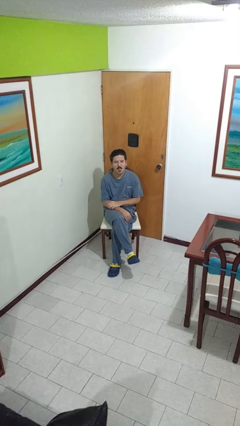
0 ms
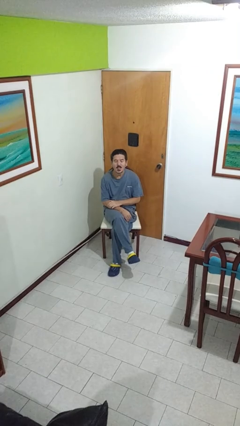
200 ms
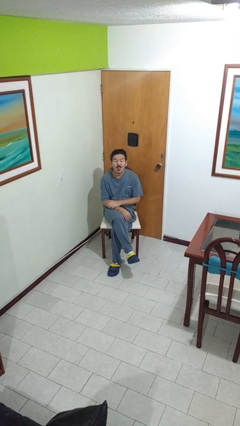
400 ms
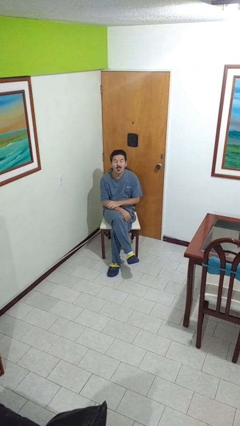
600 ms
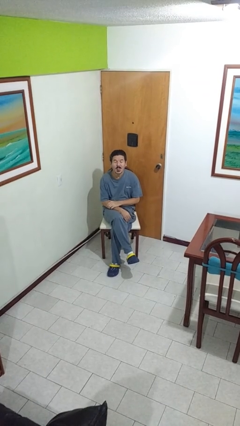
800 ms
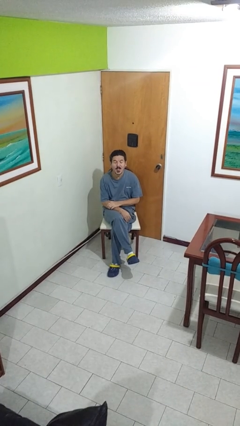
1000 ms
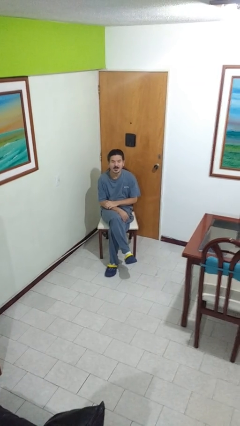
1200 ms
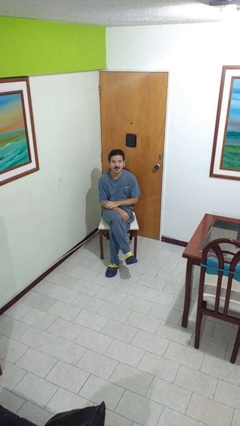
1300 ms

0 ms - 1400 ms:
person sticks out tongue

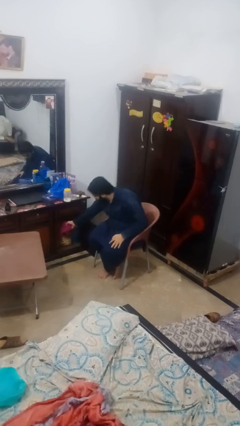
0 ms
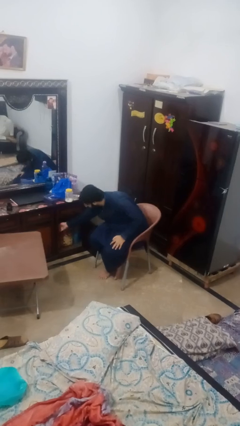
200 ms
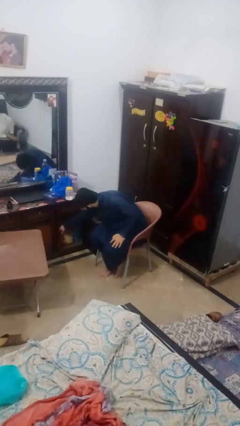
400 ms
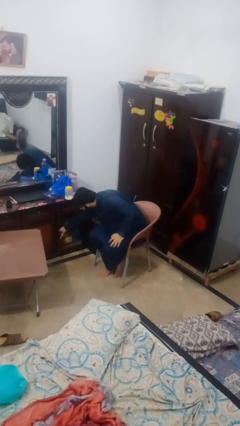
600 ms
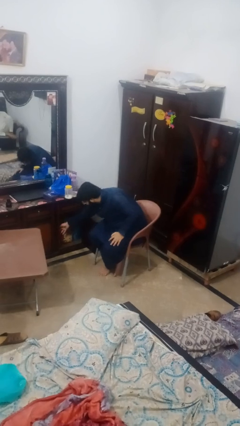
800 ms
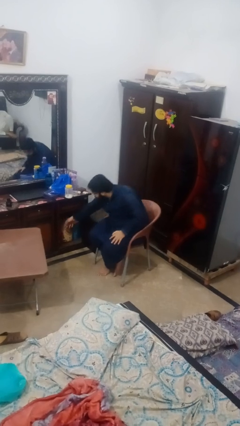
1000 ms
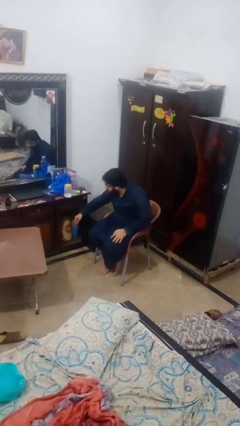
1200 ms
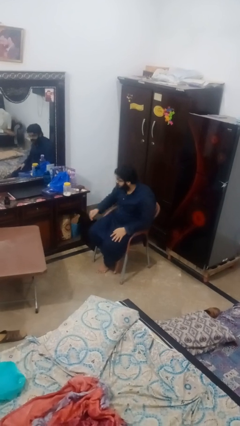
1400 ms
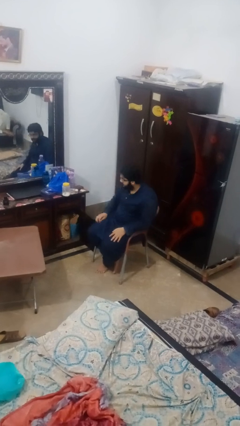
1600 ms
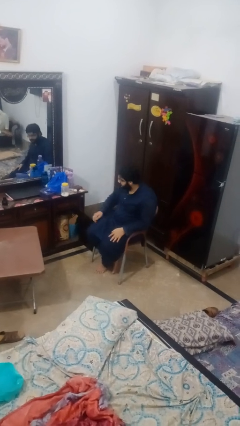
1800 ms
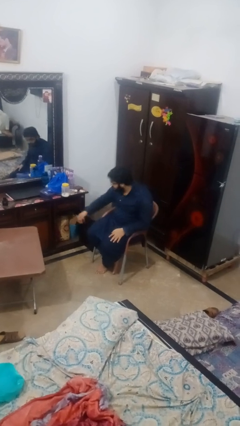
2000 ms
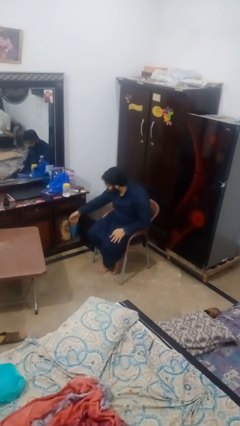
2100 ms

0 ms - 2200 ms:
person puts clothes into dresser

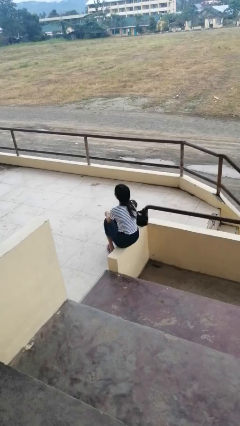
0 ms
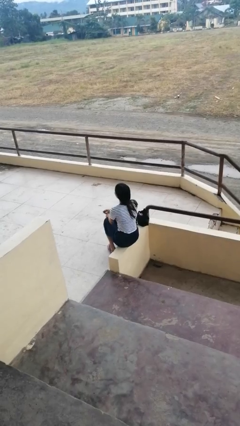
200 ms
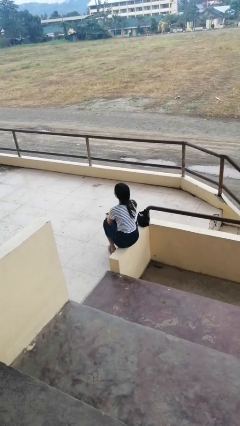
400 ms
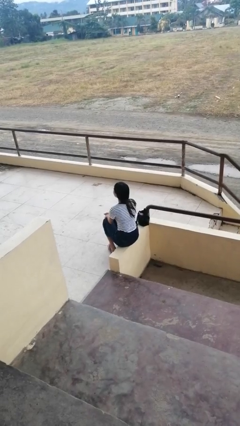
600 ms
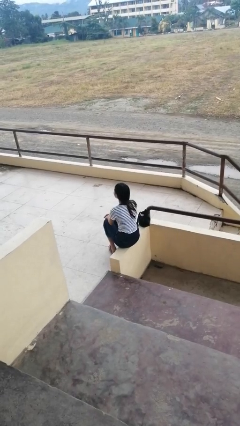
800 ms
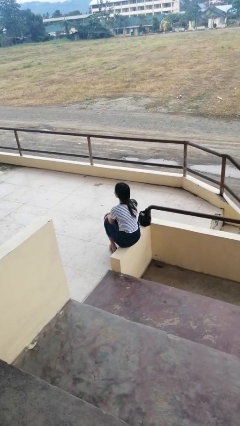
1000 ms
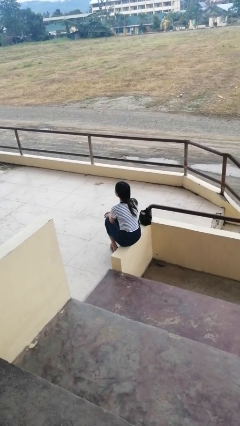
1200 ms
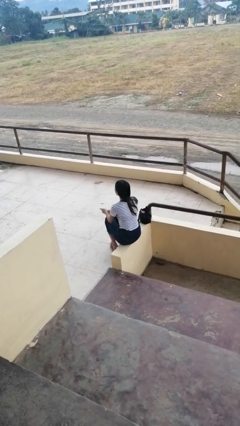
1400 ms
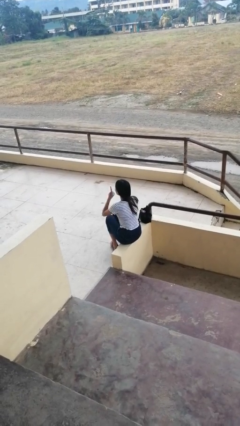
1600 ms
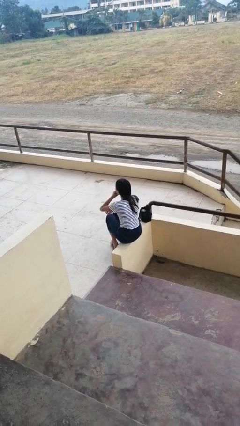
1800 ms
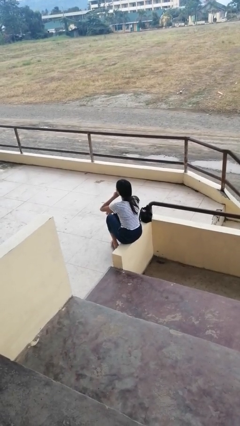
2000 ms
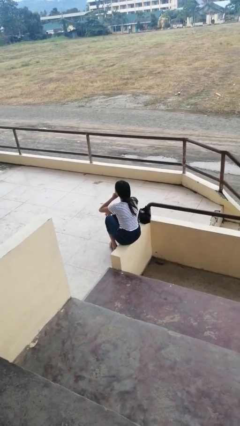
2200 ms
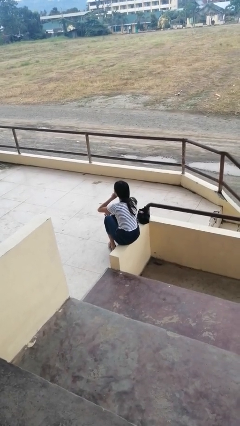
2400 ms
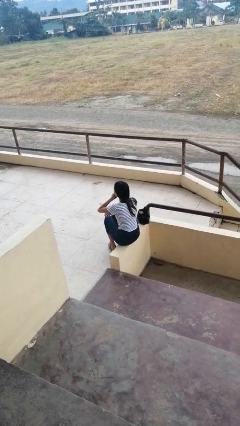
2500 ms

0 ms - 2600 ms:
person gestures be quiet

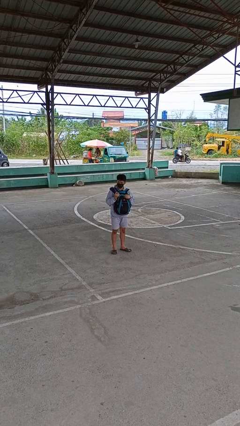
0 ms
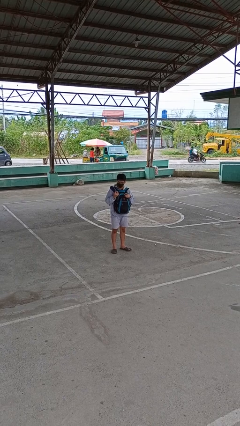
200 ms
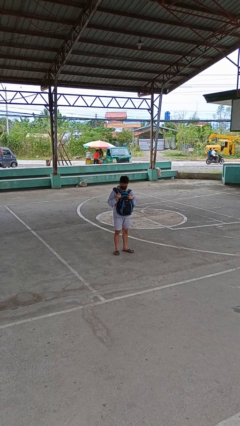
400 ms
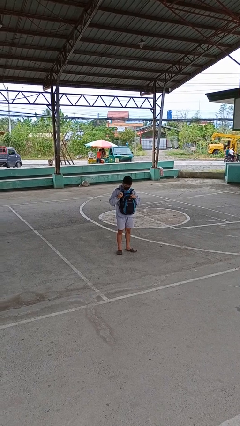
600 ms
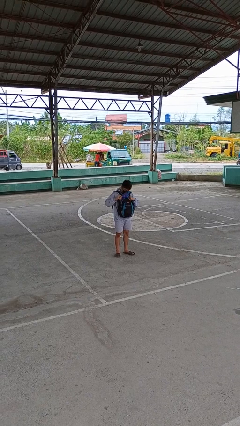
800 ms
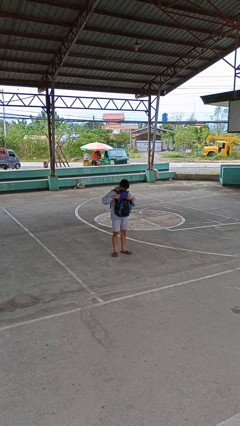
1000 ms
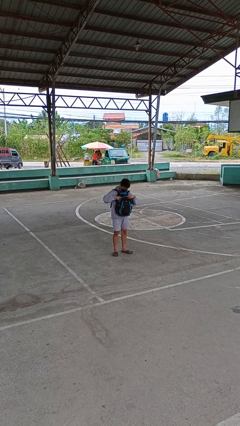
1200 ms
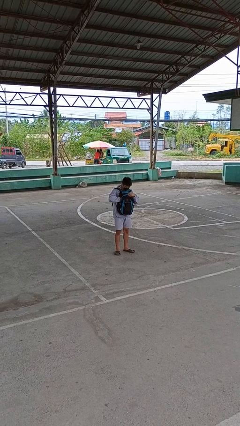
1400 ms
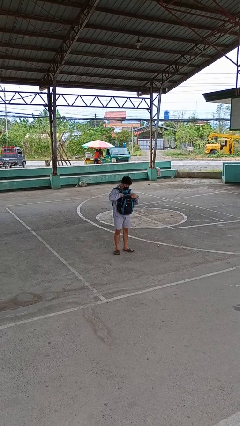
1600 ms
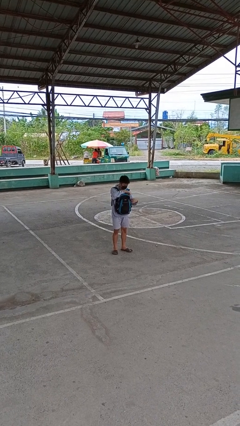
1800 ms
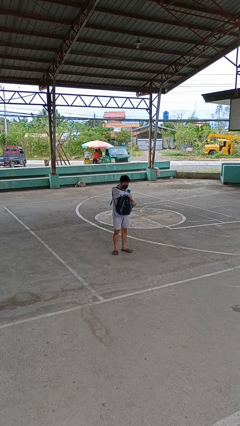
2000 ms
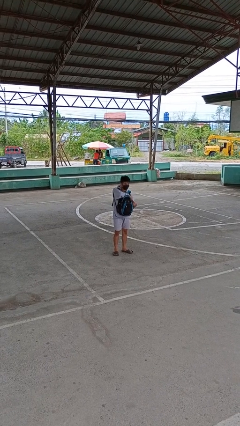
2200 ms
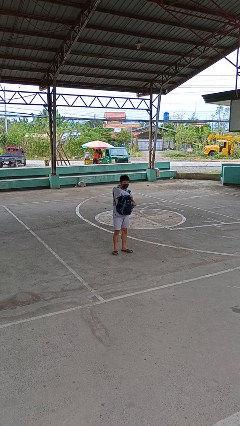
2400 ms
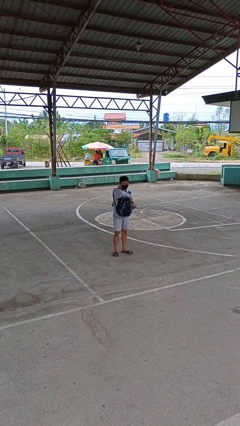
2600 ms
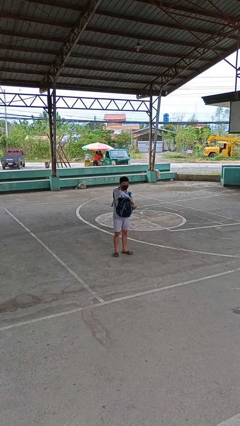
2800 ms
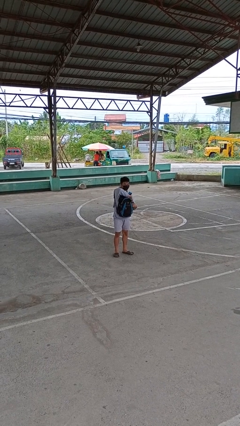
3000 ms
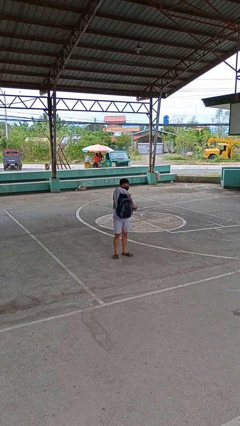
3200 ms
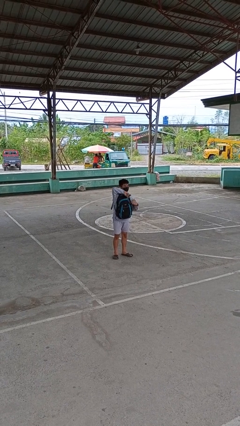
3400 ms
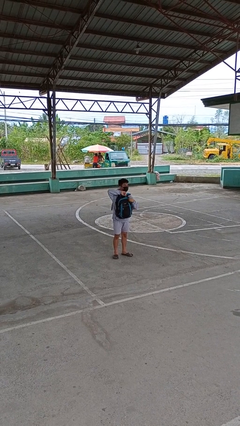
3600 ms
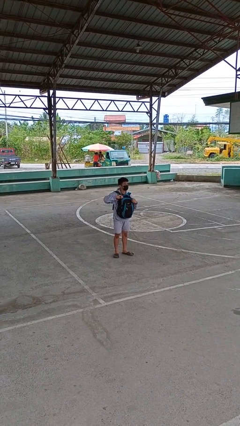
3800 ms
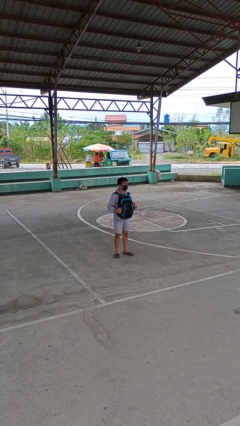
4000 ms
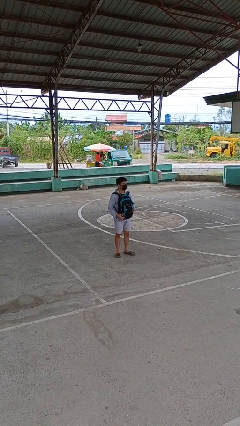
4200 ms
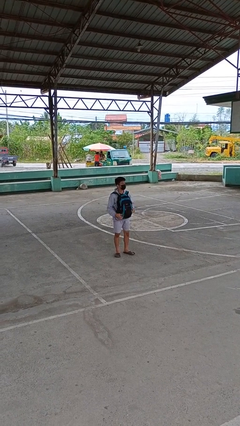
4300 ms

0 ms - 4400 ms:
person puts object into backpack

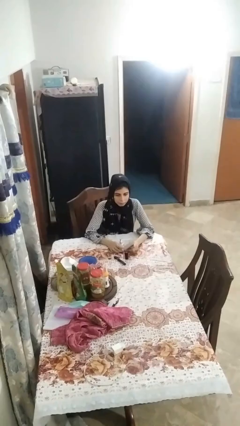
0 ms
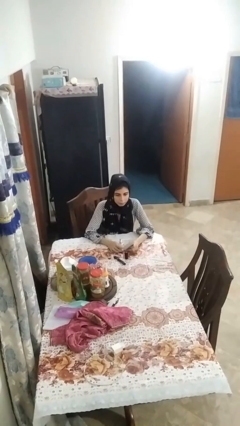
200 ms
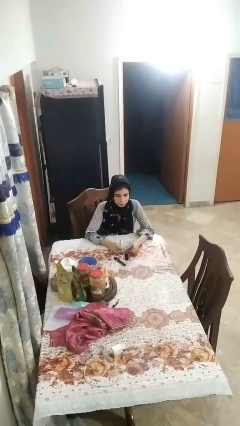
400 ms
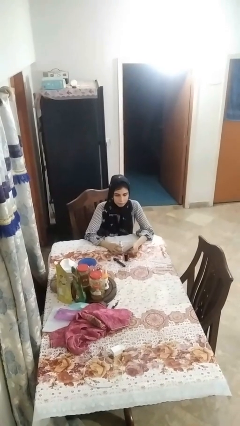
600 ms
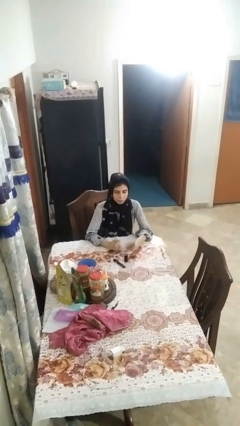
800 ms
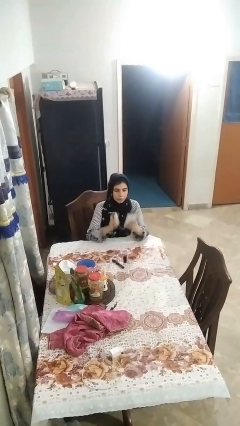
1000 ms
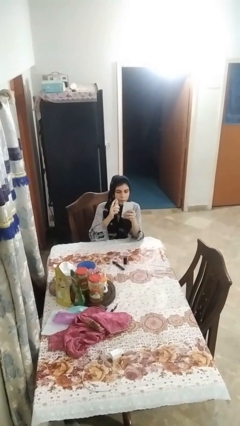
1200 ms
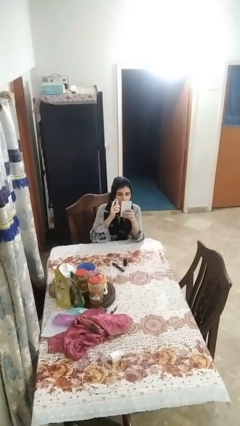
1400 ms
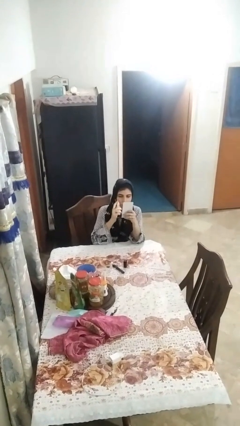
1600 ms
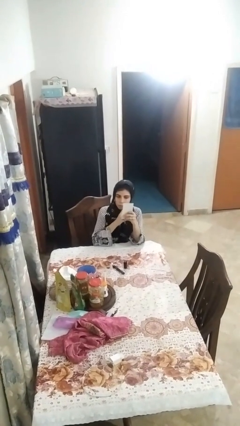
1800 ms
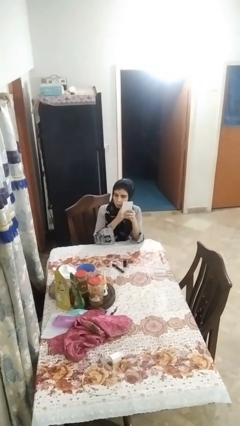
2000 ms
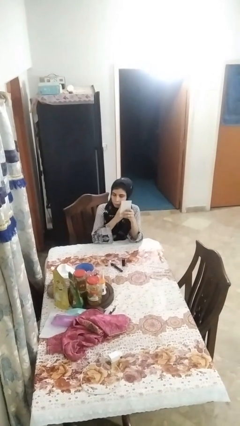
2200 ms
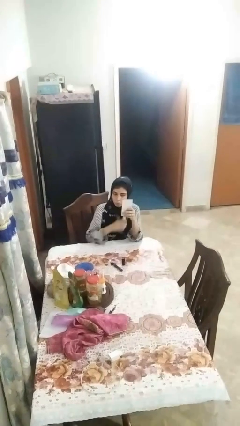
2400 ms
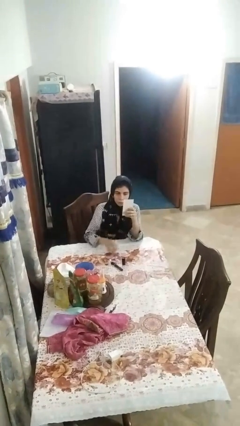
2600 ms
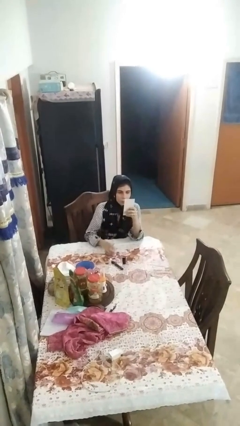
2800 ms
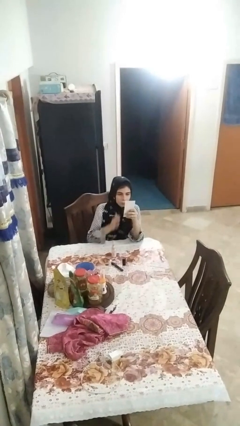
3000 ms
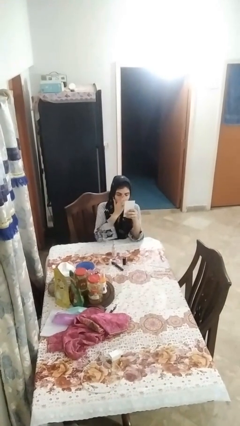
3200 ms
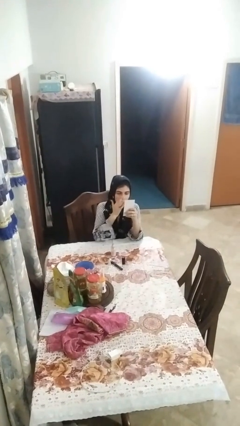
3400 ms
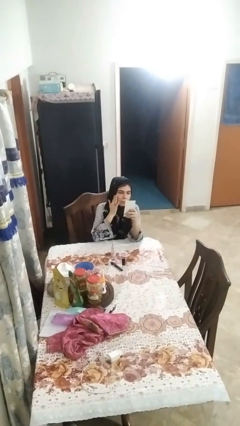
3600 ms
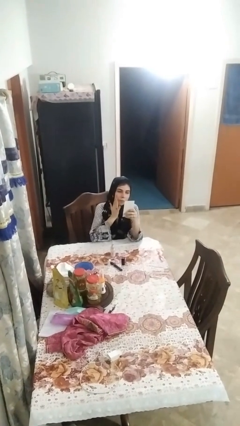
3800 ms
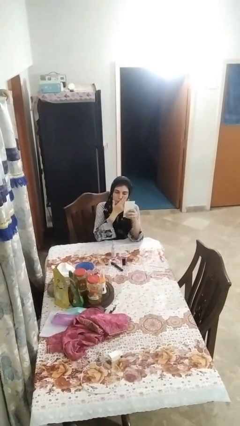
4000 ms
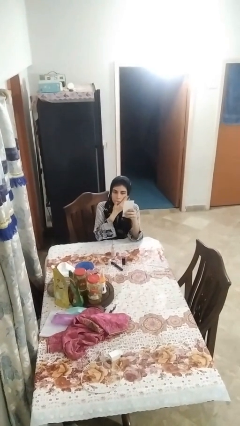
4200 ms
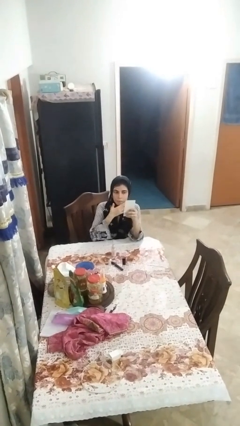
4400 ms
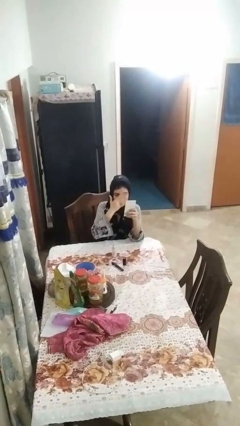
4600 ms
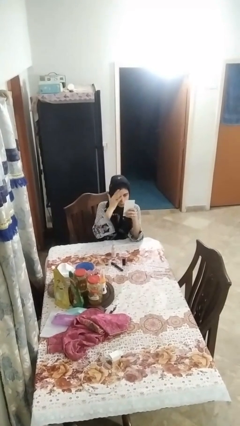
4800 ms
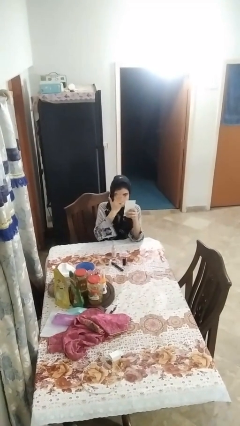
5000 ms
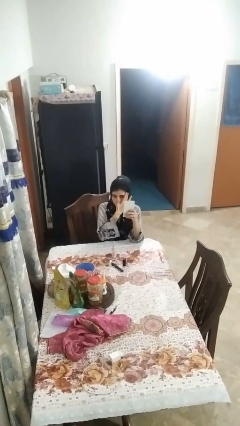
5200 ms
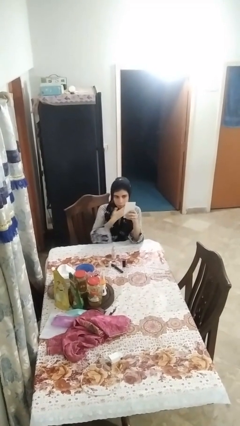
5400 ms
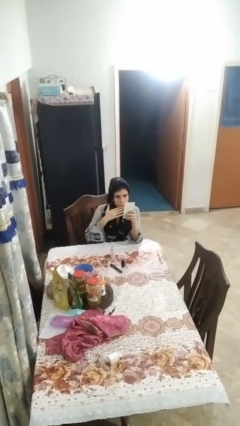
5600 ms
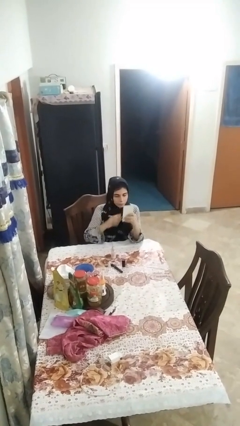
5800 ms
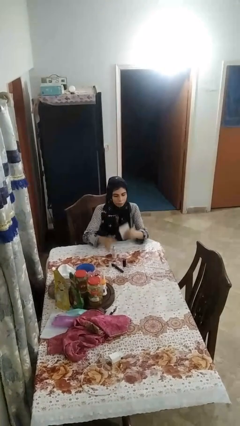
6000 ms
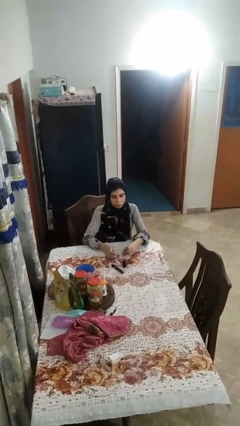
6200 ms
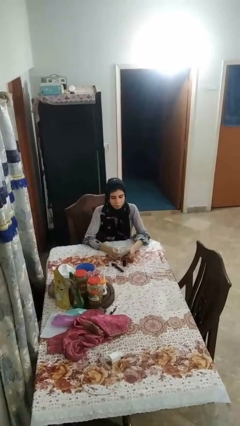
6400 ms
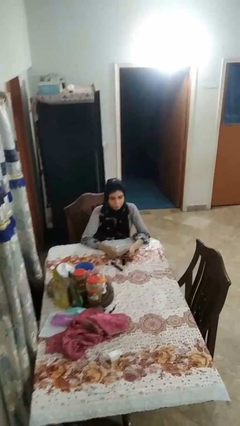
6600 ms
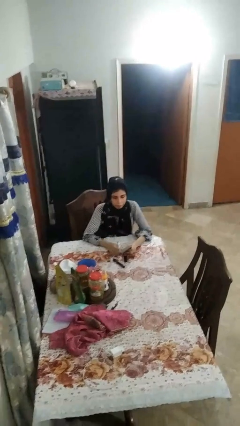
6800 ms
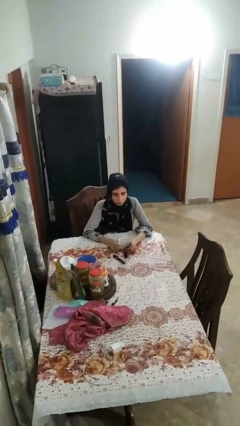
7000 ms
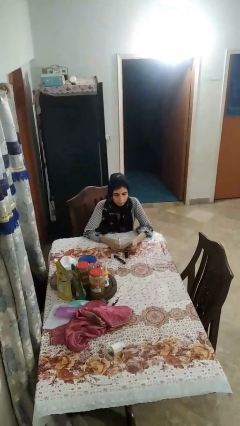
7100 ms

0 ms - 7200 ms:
person applies foundation makeup
